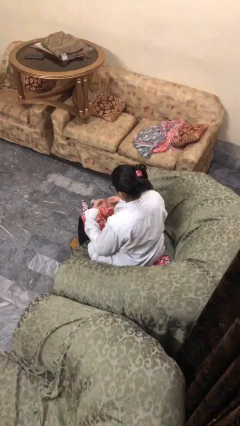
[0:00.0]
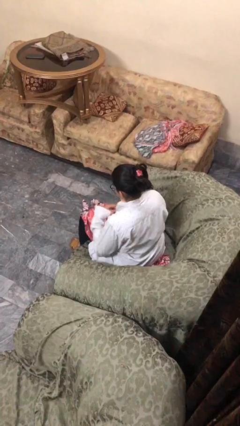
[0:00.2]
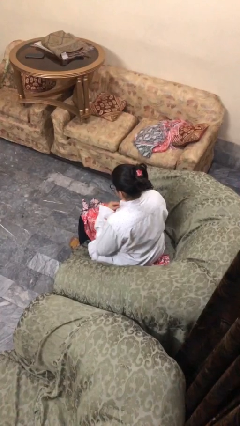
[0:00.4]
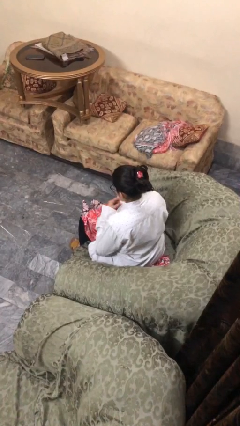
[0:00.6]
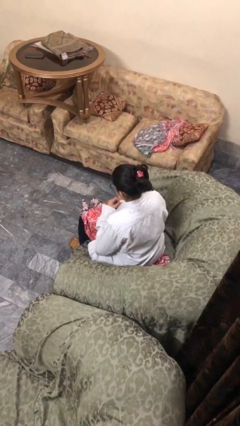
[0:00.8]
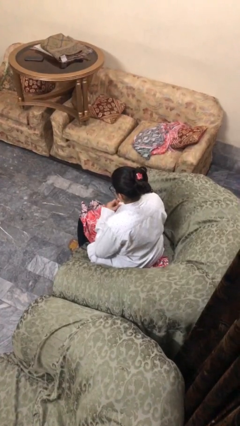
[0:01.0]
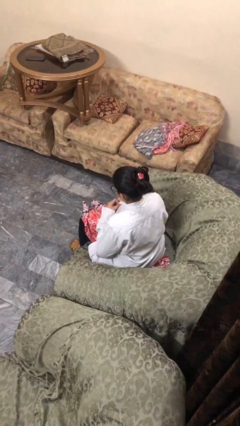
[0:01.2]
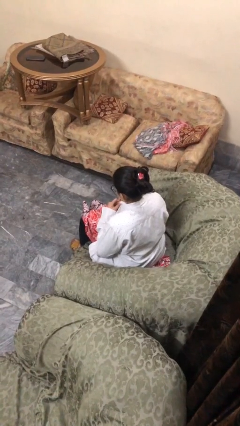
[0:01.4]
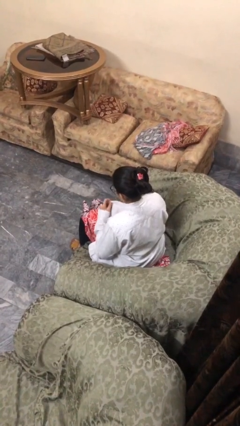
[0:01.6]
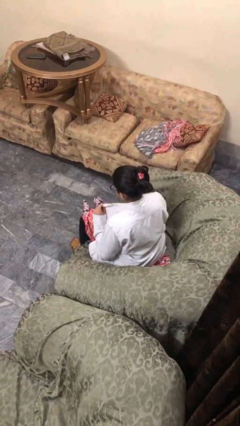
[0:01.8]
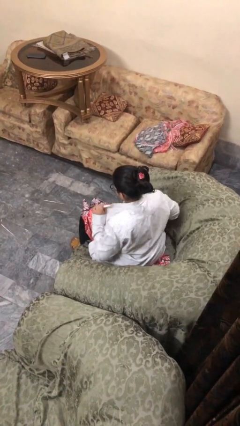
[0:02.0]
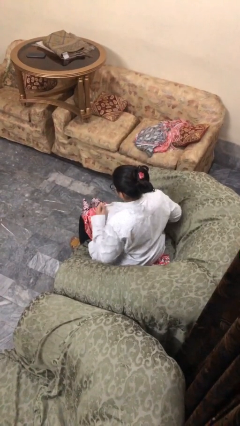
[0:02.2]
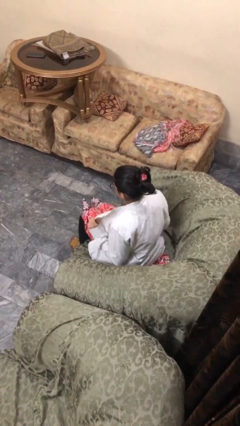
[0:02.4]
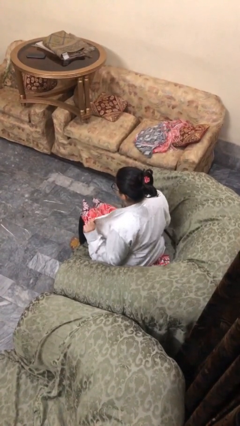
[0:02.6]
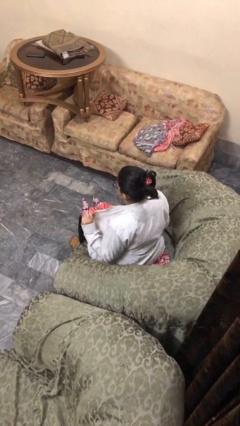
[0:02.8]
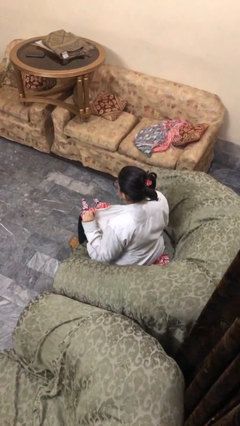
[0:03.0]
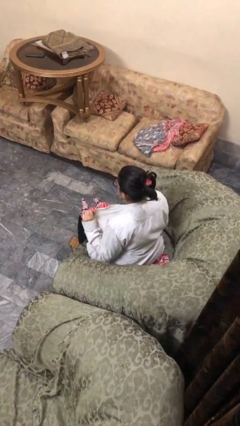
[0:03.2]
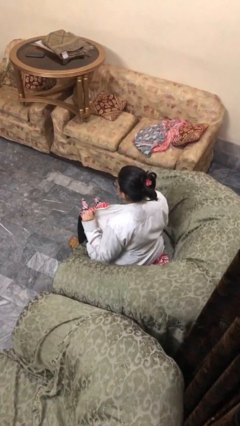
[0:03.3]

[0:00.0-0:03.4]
person unbuttons shirt

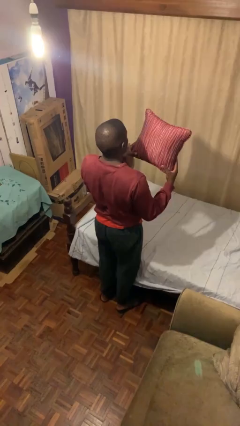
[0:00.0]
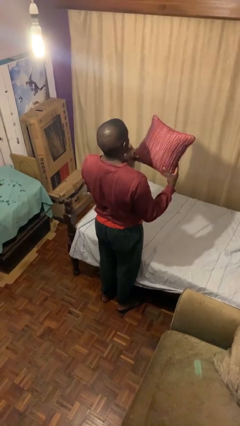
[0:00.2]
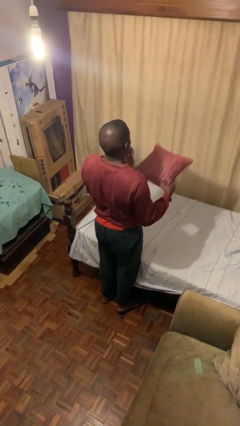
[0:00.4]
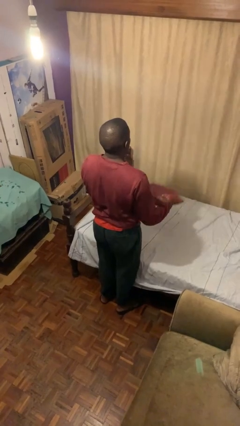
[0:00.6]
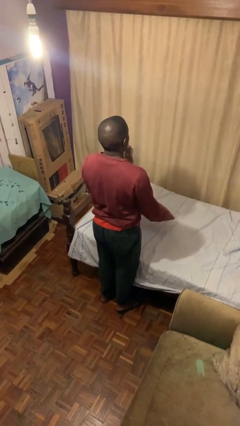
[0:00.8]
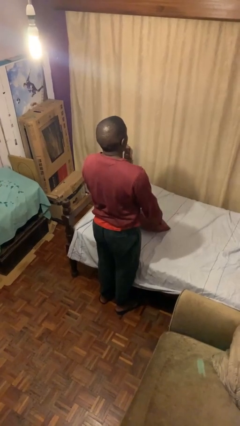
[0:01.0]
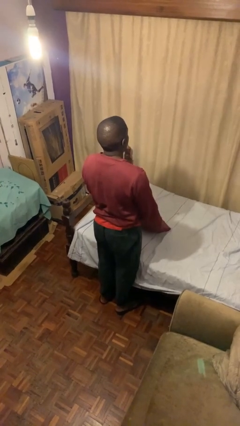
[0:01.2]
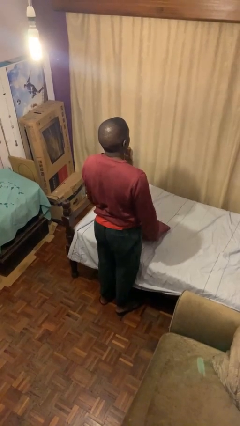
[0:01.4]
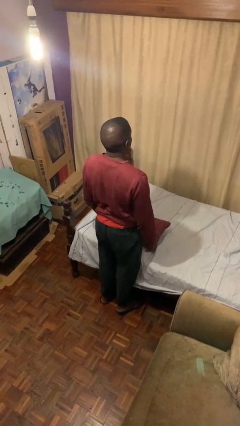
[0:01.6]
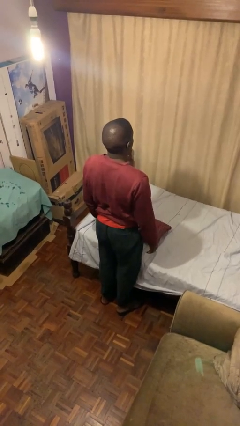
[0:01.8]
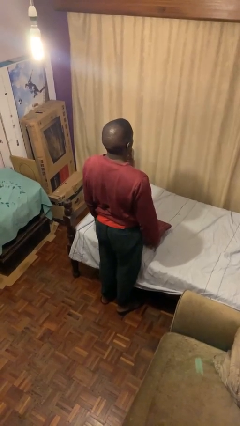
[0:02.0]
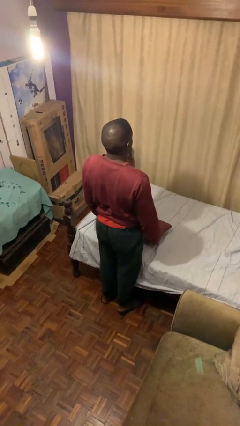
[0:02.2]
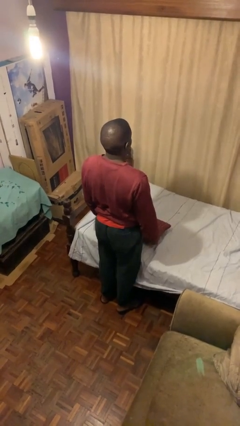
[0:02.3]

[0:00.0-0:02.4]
person puts down object on bed

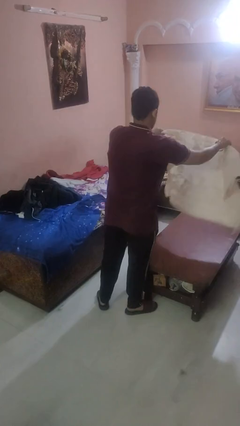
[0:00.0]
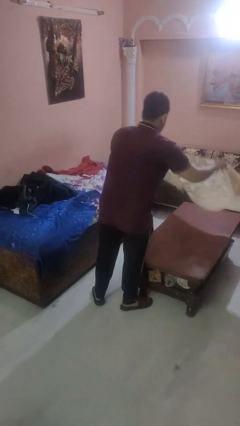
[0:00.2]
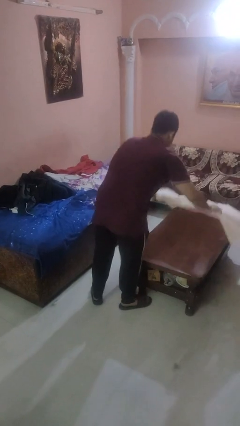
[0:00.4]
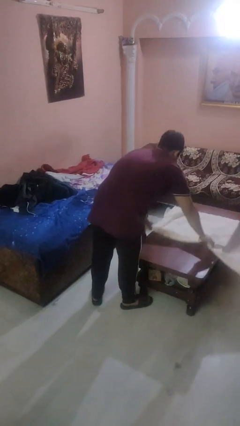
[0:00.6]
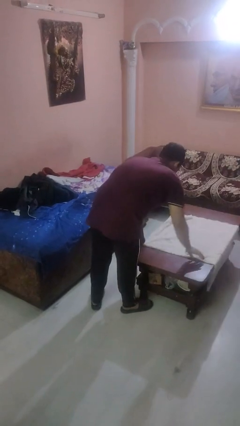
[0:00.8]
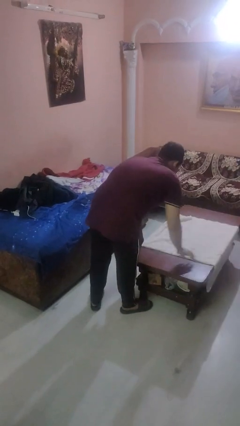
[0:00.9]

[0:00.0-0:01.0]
person spreads tablecloth

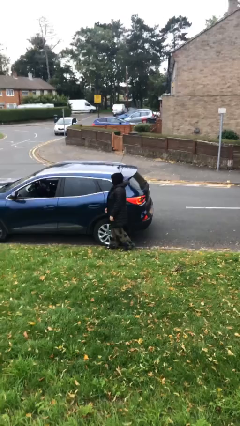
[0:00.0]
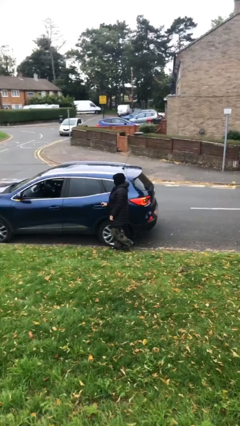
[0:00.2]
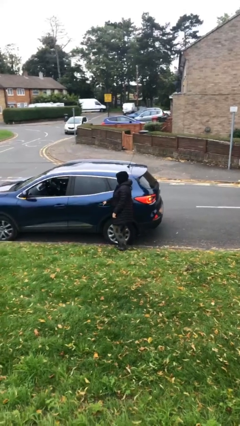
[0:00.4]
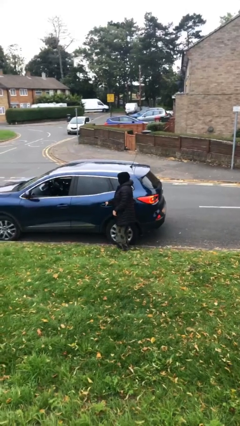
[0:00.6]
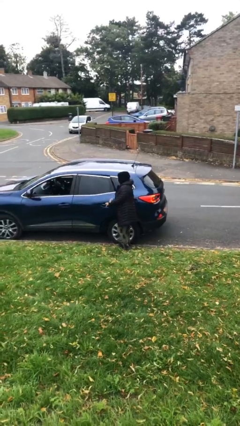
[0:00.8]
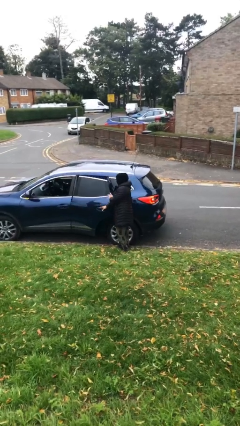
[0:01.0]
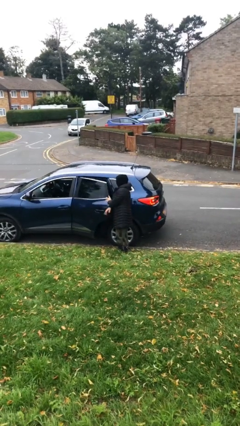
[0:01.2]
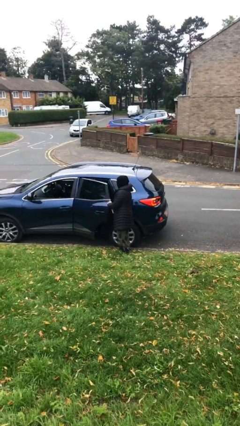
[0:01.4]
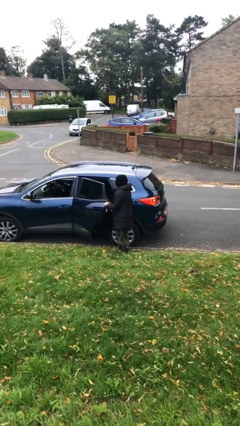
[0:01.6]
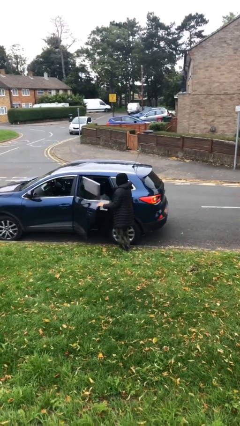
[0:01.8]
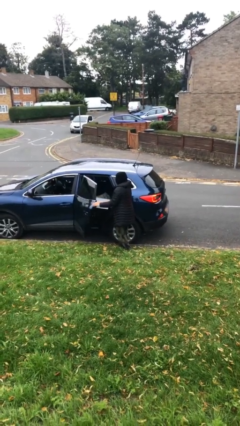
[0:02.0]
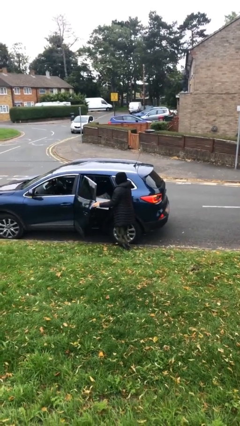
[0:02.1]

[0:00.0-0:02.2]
person opens car door

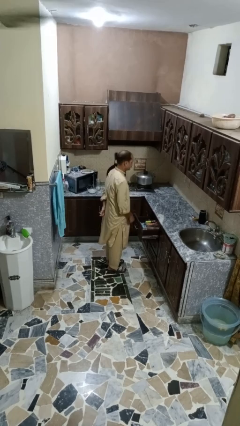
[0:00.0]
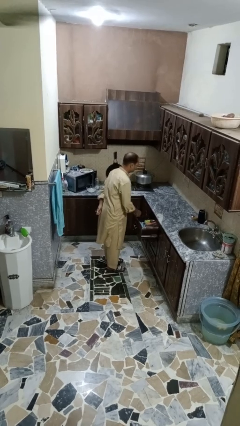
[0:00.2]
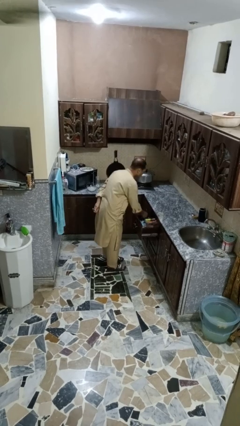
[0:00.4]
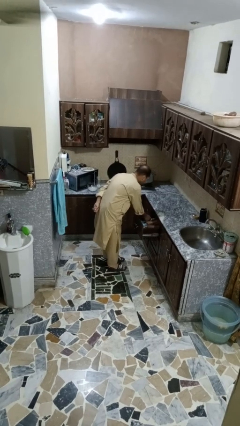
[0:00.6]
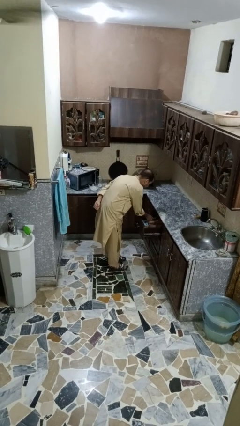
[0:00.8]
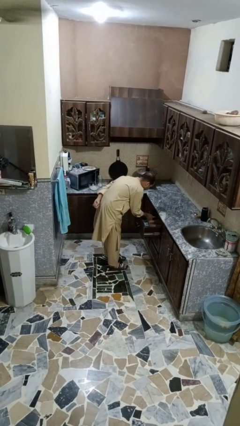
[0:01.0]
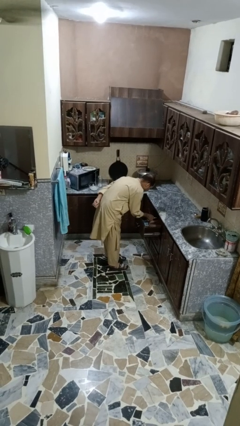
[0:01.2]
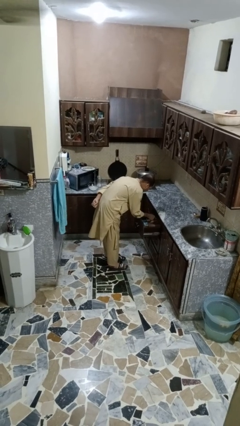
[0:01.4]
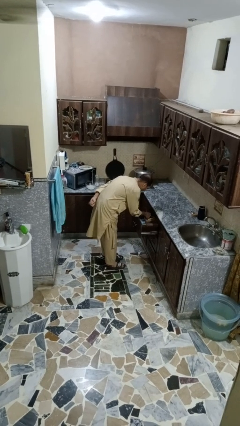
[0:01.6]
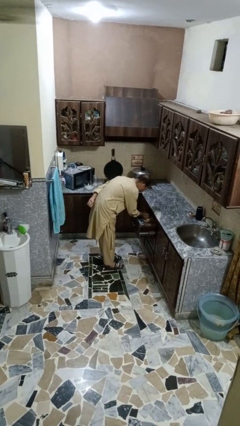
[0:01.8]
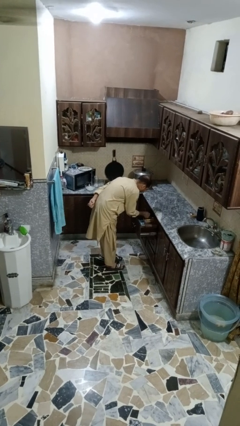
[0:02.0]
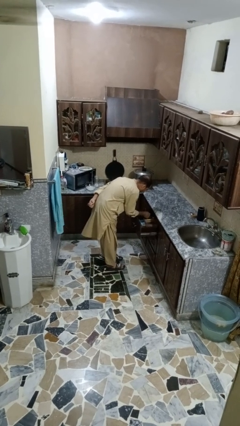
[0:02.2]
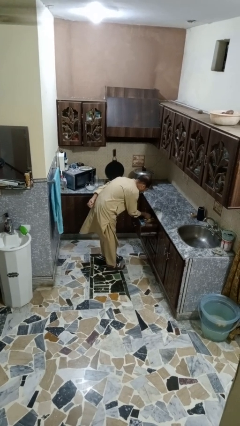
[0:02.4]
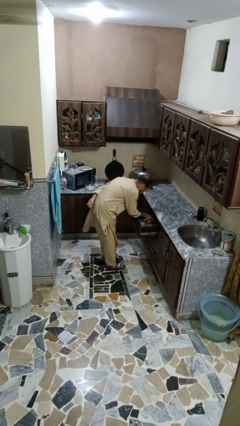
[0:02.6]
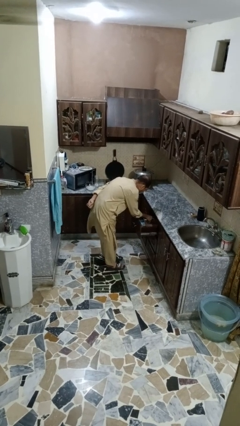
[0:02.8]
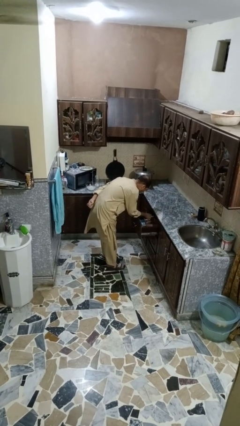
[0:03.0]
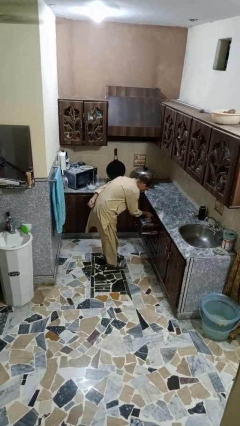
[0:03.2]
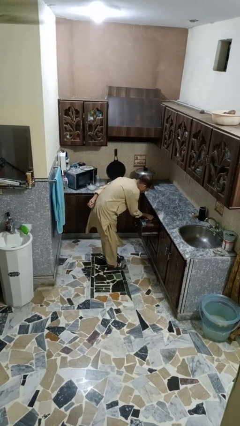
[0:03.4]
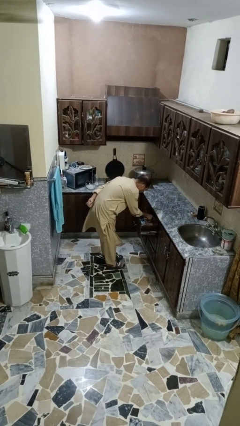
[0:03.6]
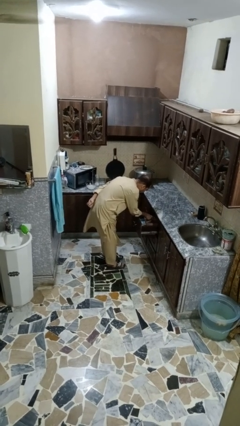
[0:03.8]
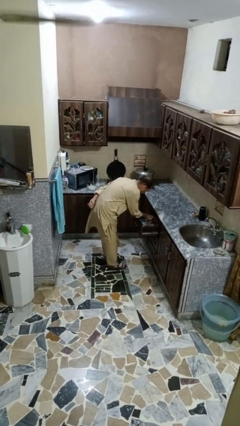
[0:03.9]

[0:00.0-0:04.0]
person searches in kitchen drawer

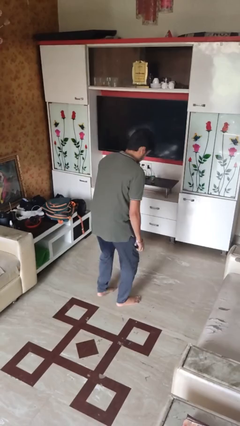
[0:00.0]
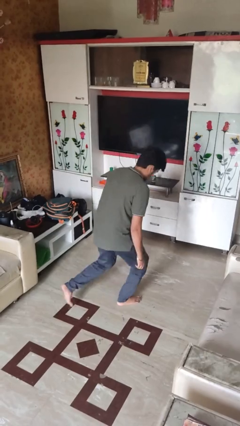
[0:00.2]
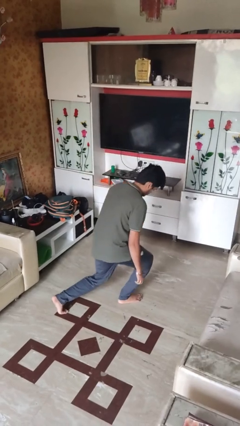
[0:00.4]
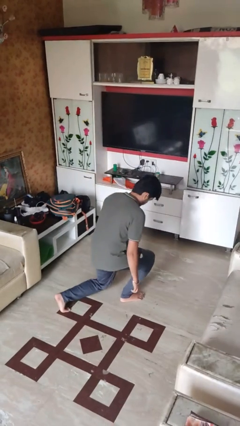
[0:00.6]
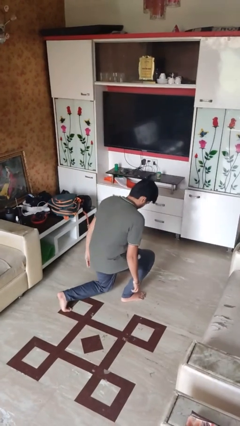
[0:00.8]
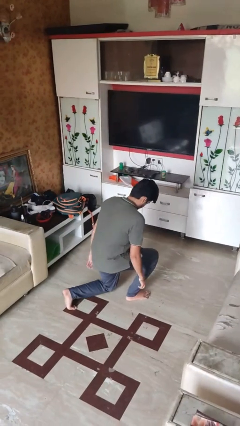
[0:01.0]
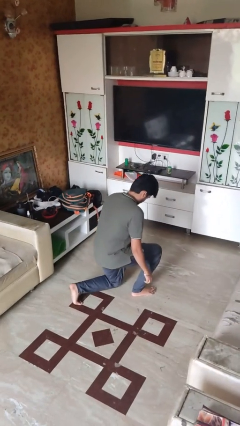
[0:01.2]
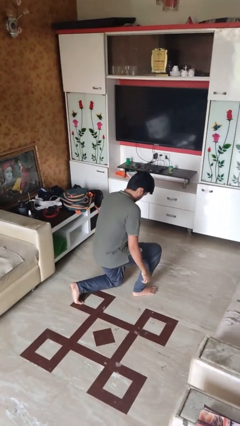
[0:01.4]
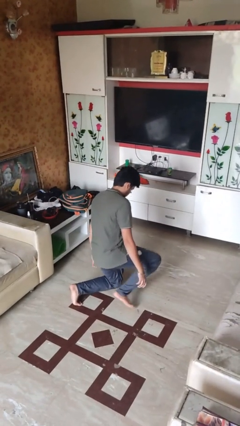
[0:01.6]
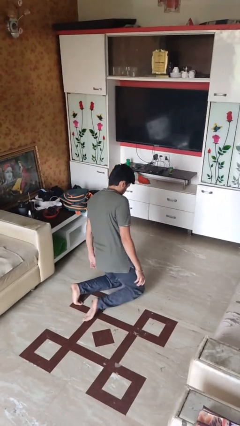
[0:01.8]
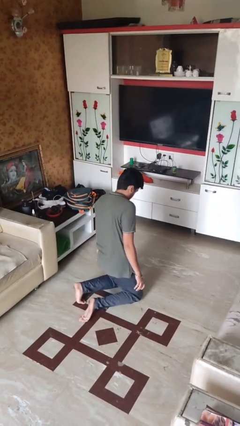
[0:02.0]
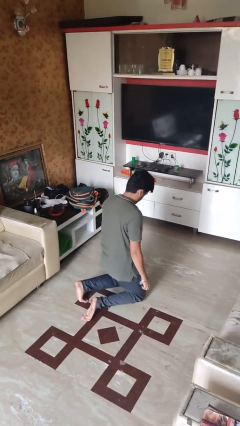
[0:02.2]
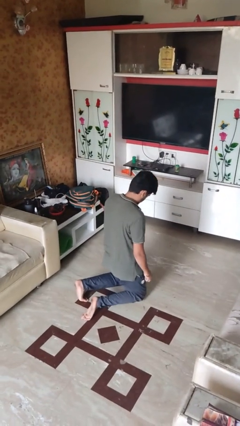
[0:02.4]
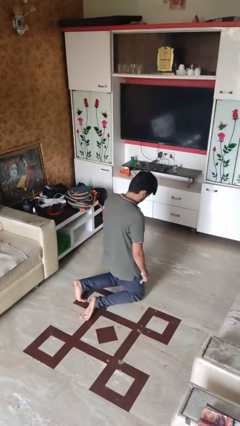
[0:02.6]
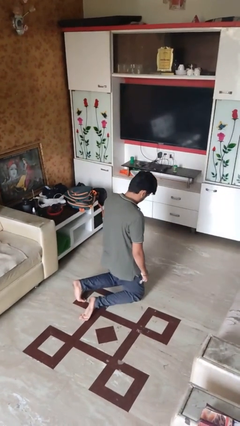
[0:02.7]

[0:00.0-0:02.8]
person kneels

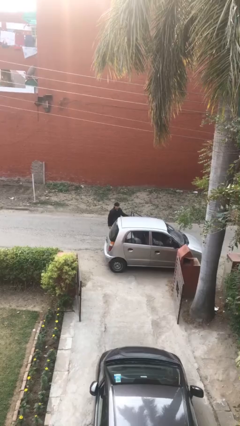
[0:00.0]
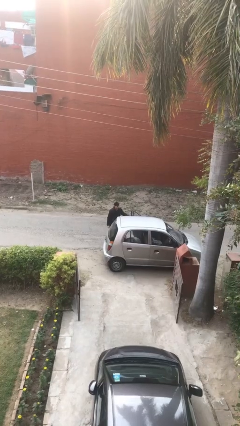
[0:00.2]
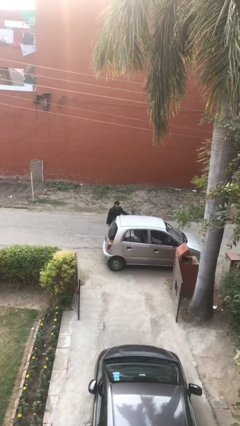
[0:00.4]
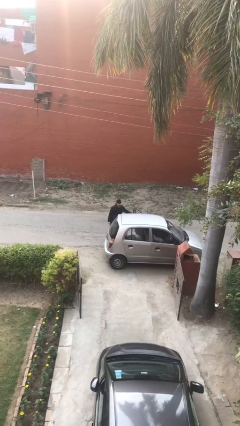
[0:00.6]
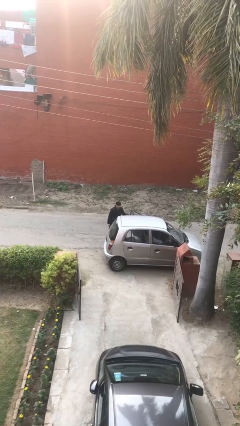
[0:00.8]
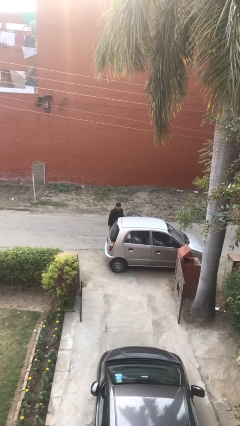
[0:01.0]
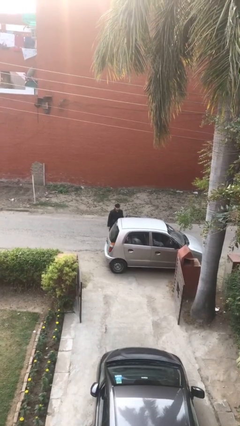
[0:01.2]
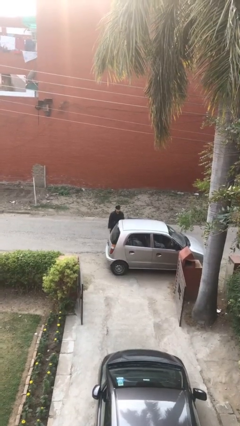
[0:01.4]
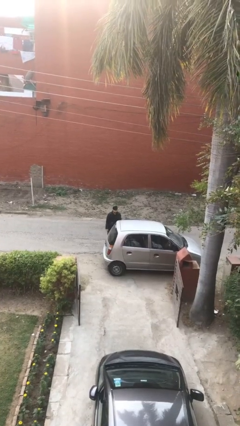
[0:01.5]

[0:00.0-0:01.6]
person closes car door
